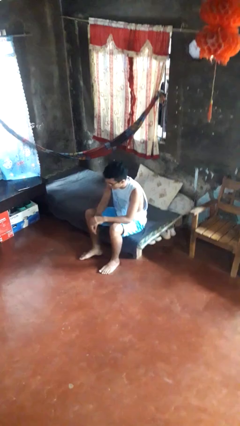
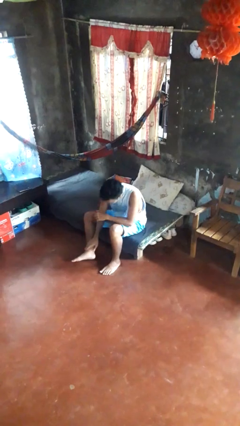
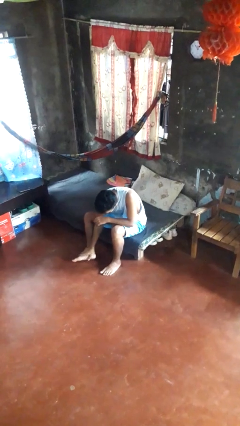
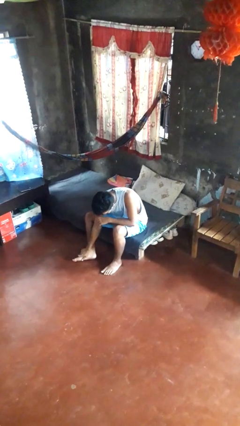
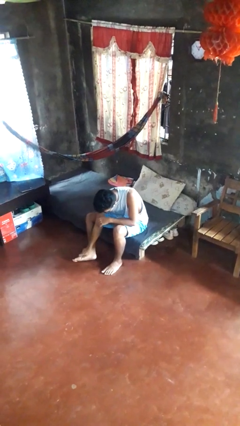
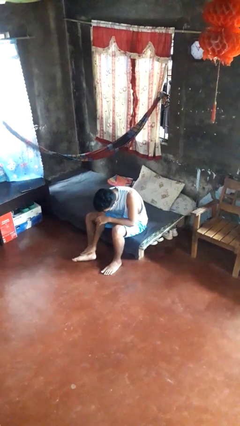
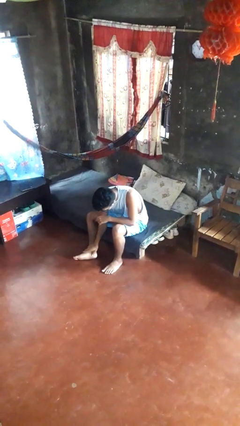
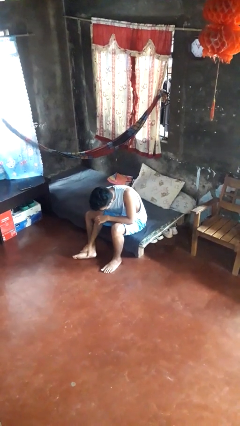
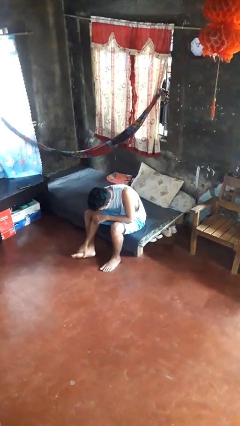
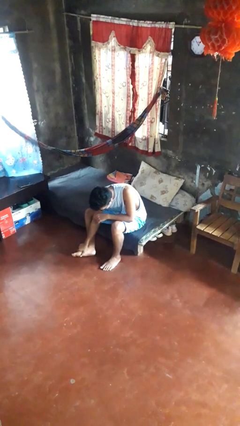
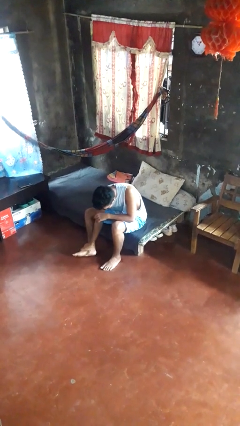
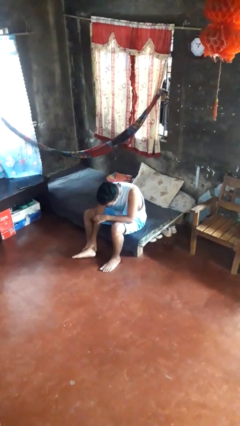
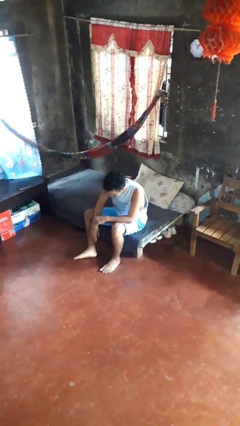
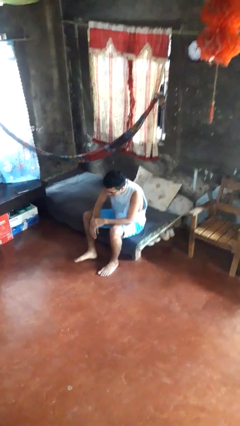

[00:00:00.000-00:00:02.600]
person rubs foot

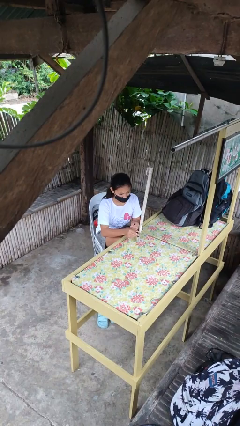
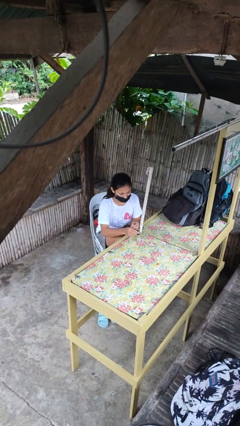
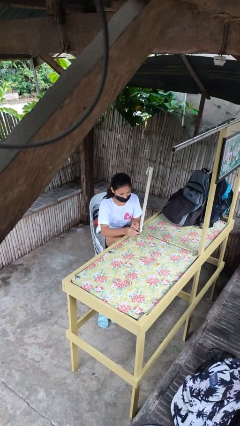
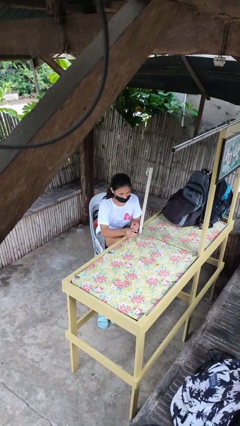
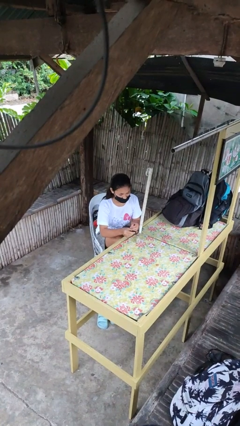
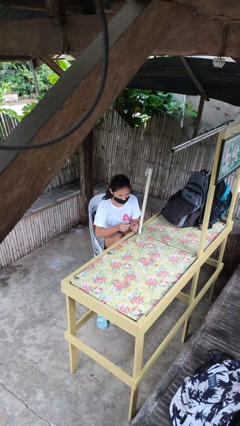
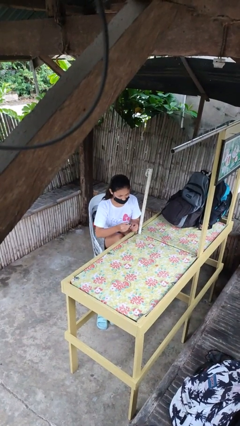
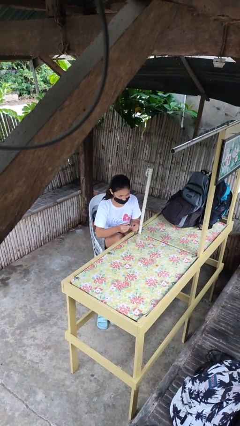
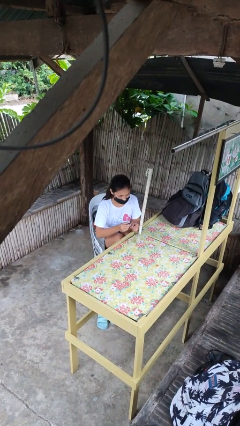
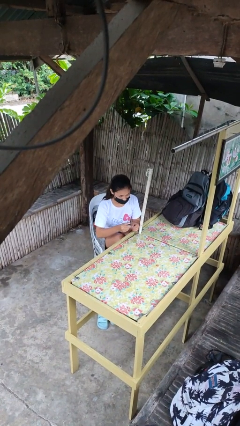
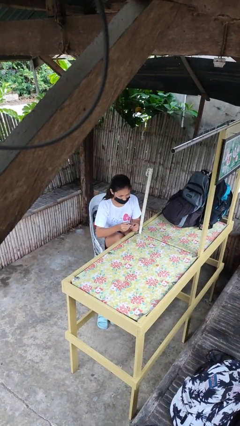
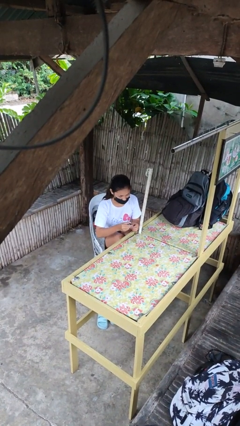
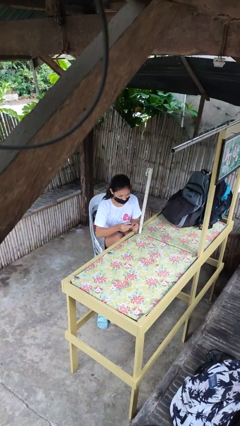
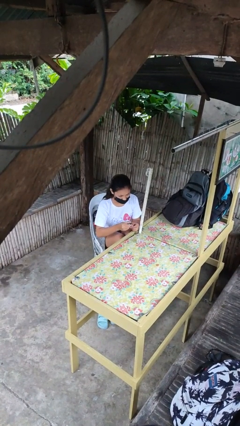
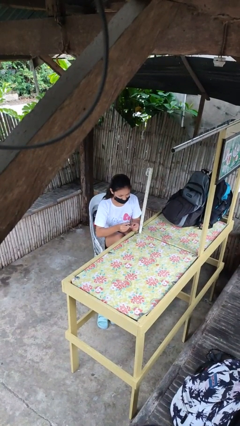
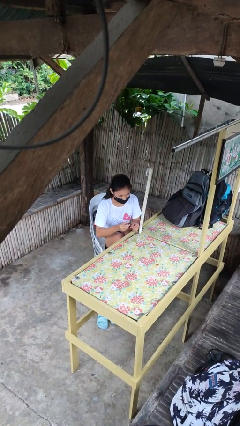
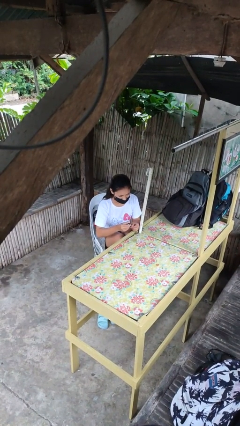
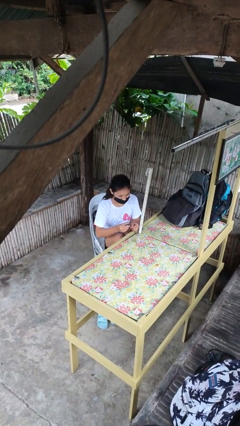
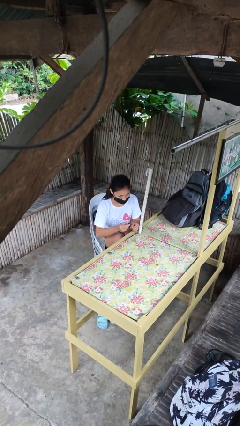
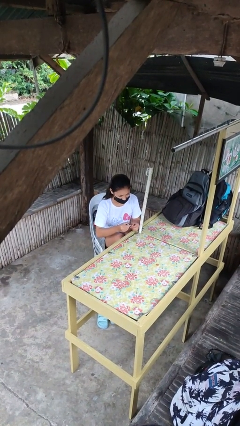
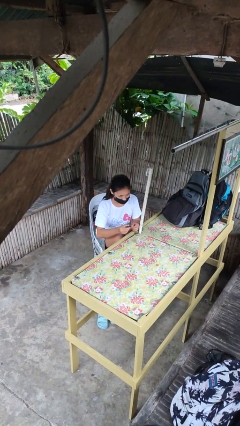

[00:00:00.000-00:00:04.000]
person paints fingernails

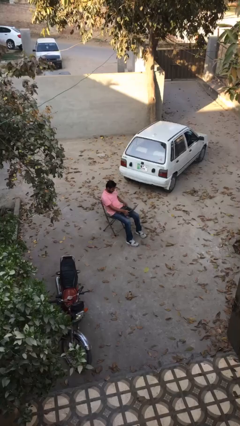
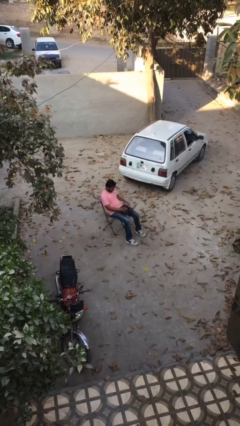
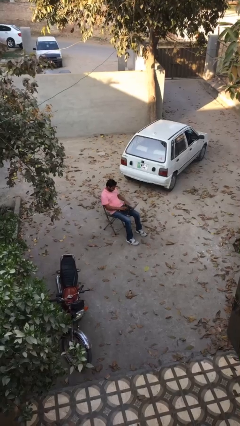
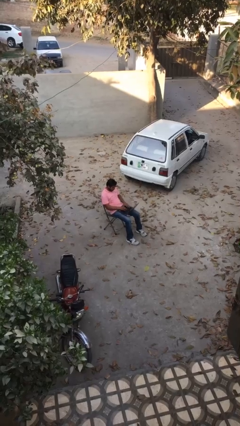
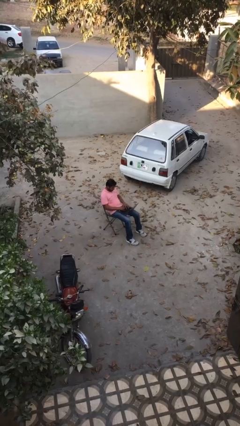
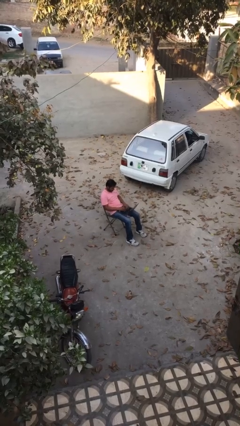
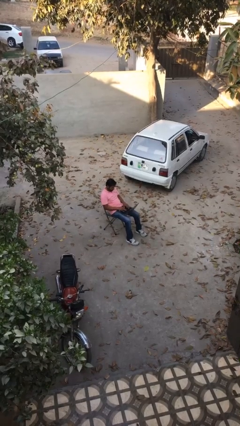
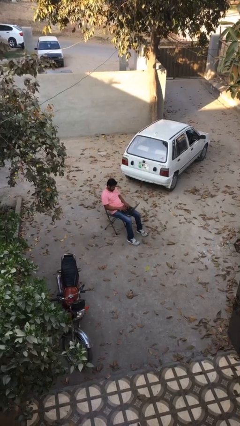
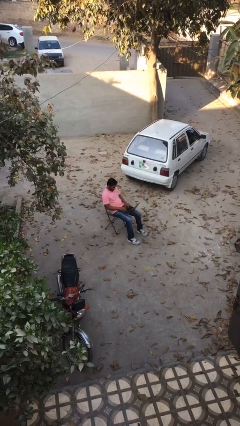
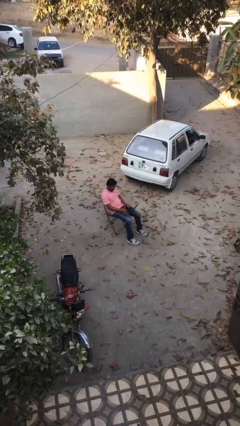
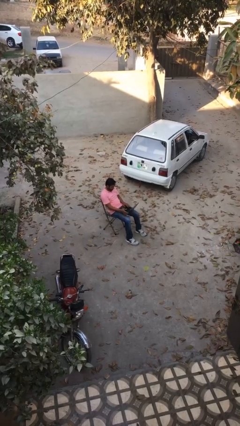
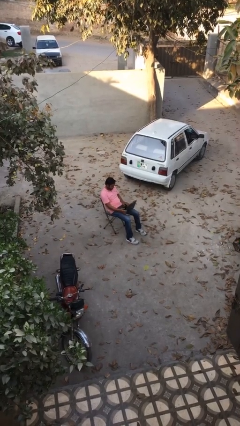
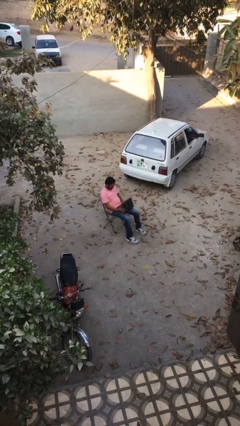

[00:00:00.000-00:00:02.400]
person interacts with laptop

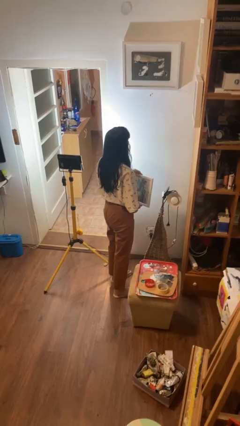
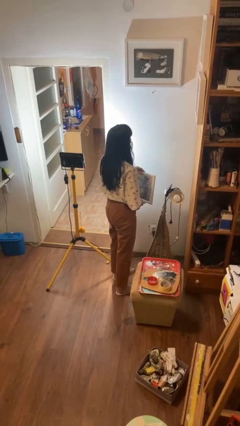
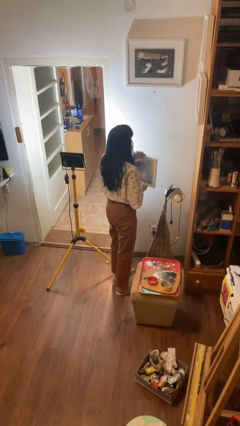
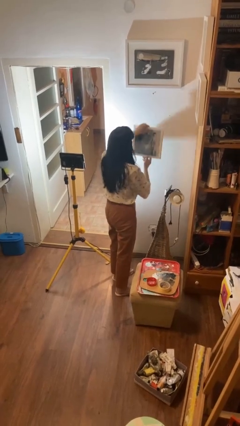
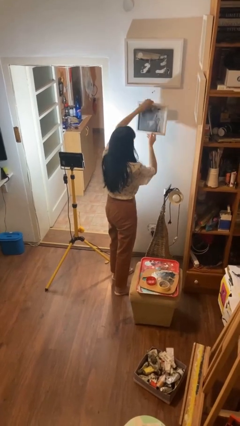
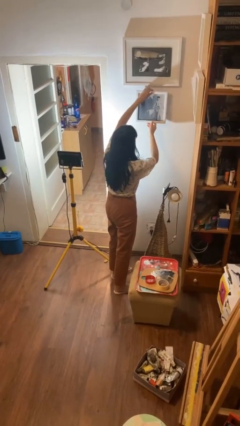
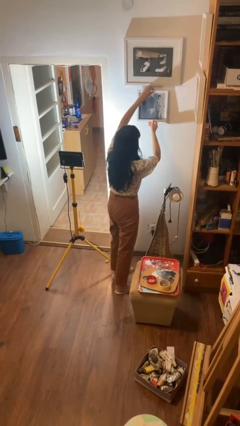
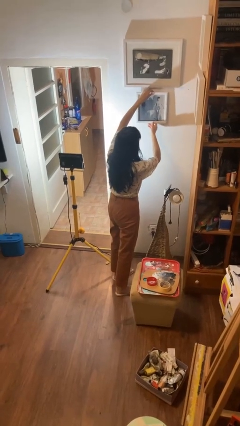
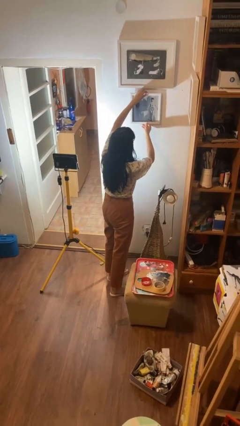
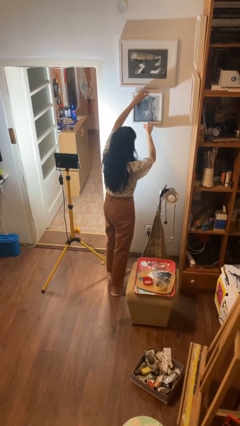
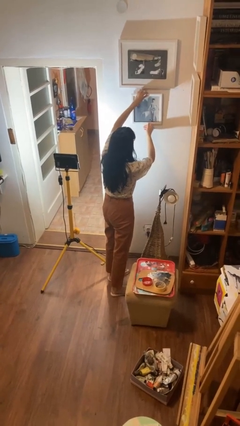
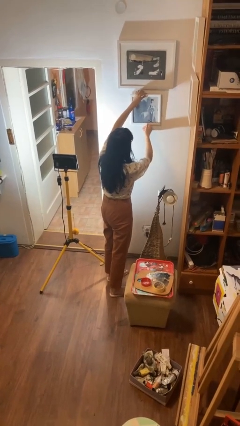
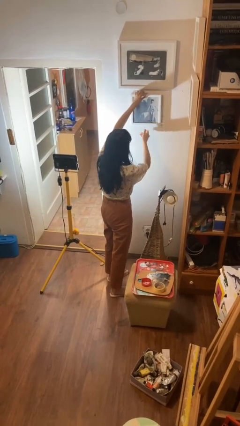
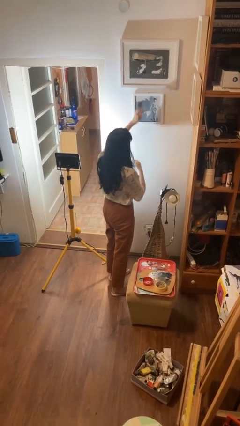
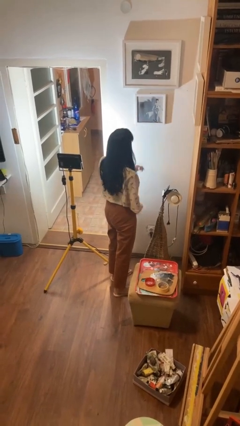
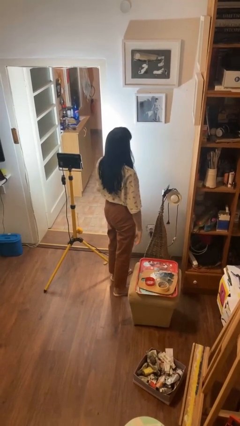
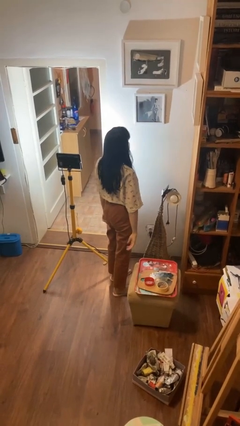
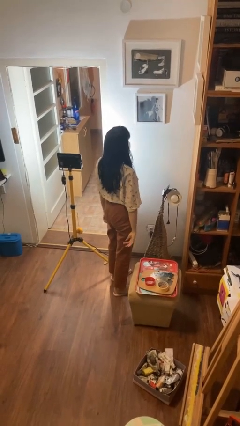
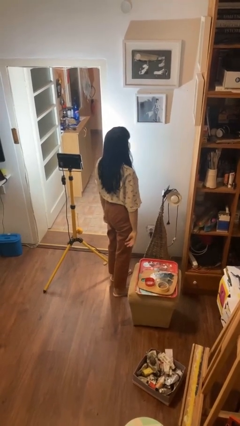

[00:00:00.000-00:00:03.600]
person puts up picture frame

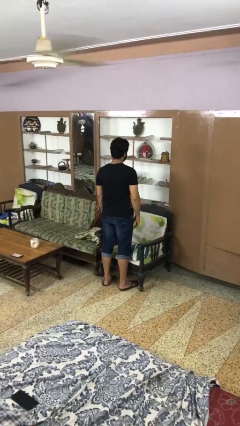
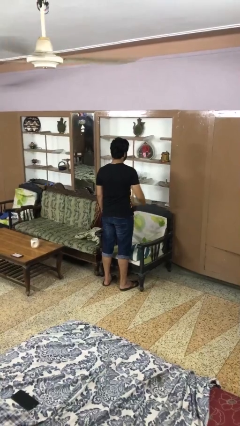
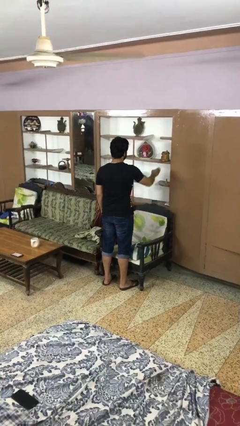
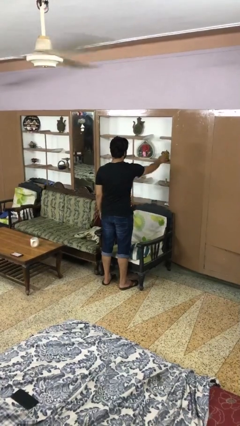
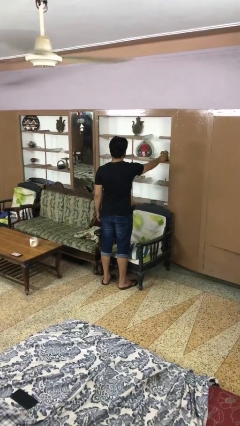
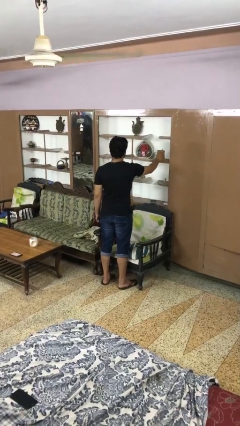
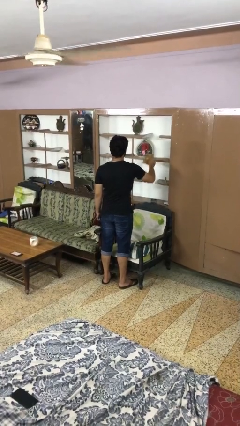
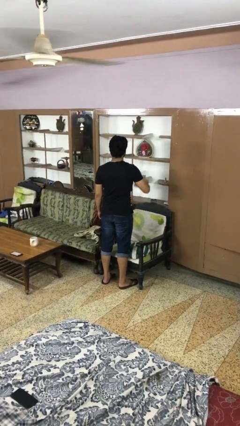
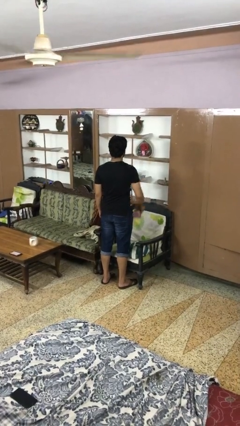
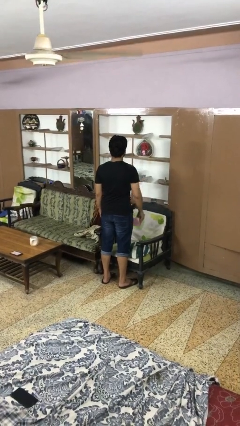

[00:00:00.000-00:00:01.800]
person picks up object from shelf

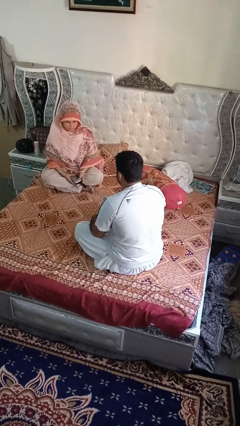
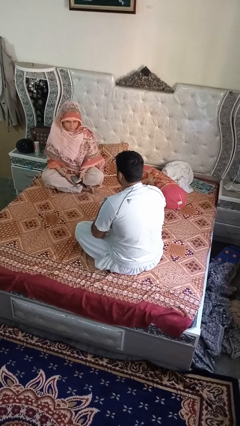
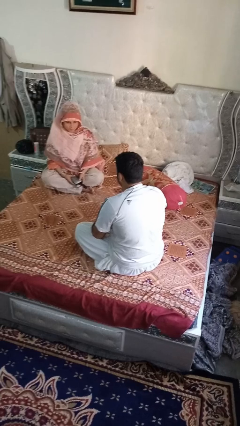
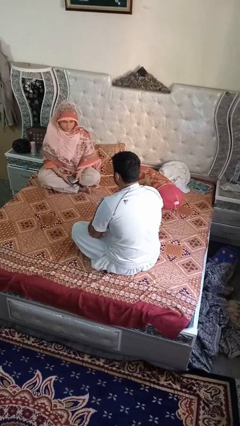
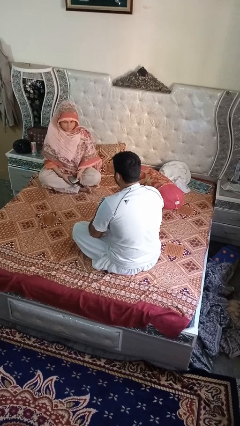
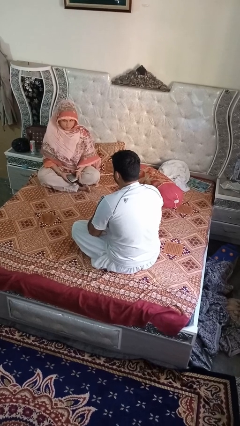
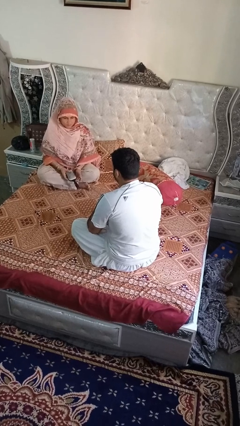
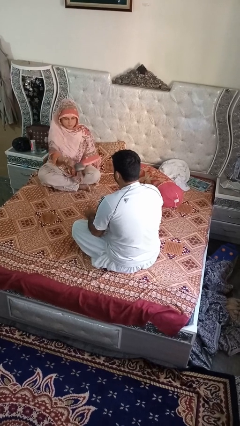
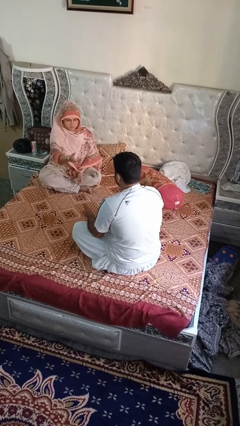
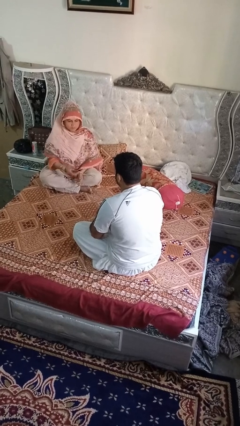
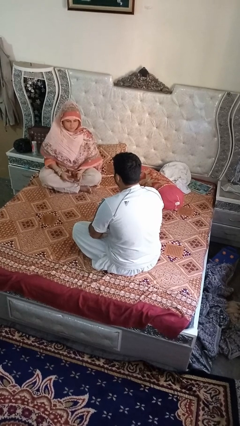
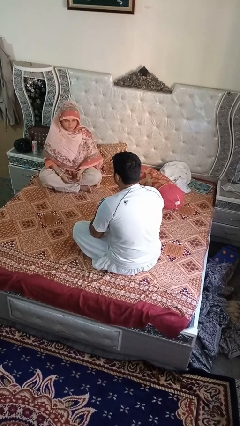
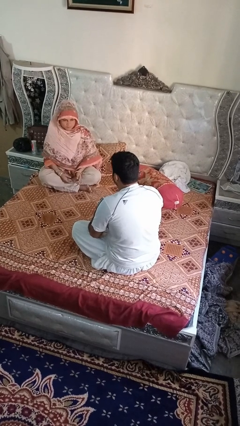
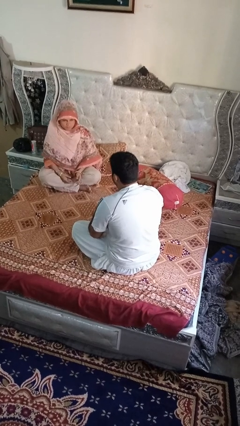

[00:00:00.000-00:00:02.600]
person catches object from person

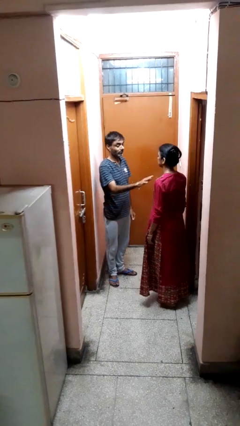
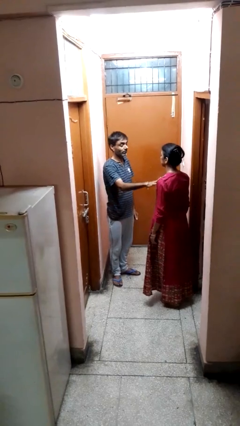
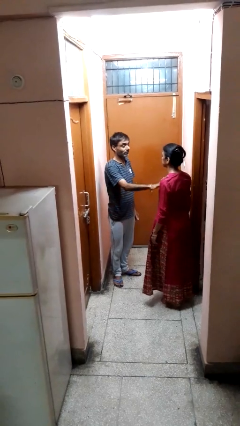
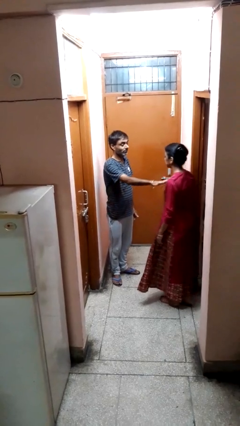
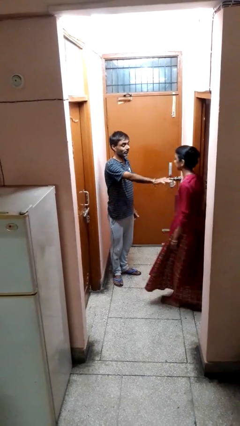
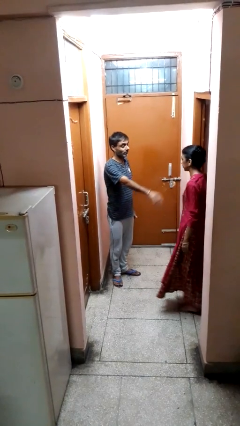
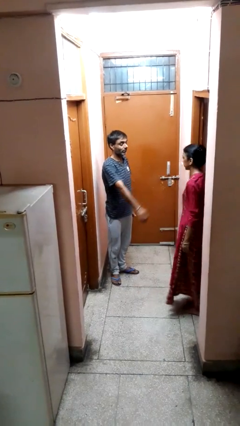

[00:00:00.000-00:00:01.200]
person shoves person
